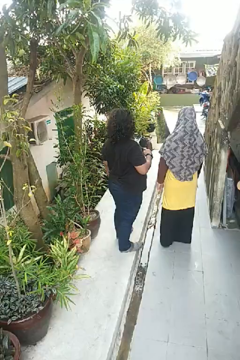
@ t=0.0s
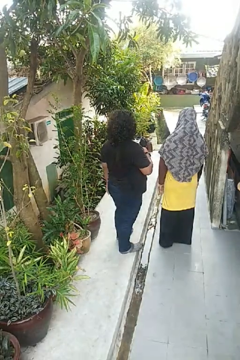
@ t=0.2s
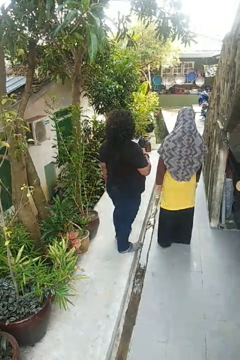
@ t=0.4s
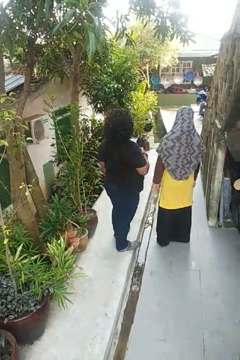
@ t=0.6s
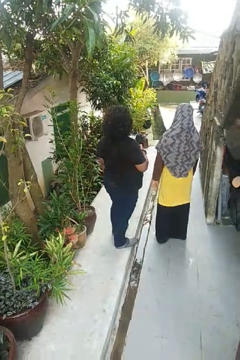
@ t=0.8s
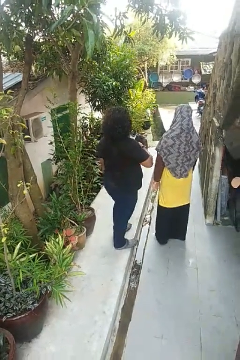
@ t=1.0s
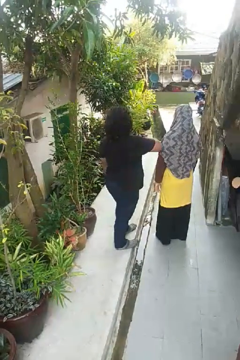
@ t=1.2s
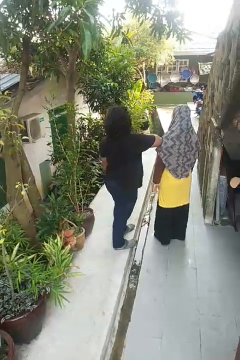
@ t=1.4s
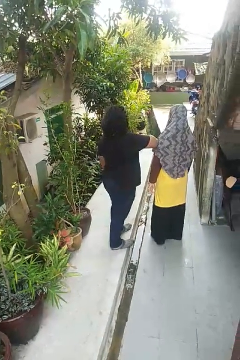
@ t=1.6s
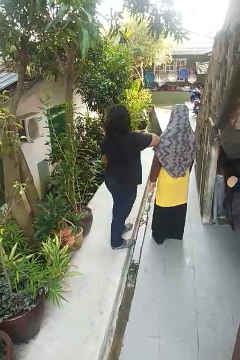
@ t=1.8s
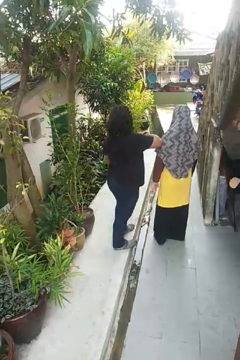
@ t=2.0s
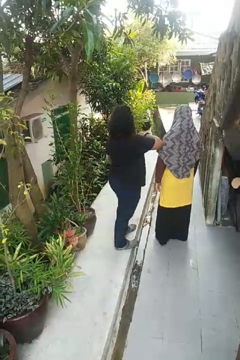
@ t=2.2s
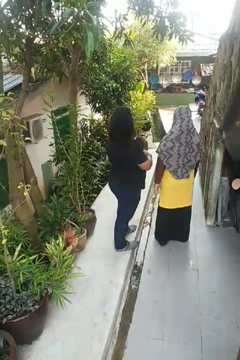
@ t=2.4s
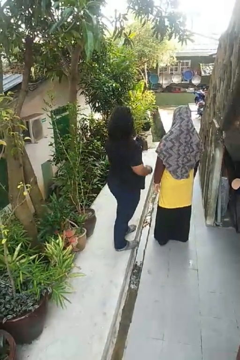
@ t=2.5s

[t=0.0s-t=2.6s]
person nudges person with elbow

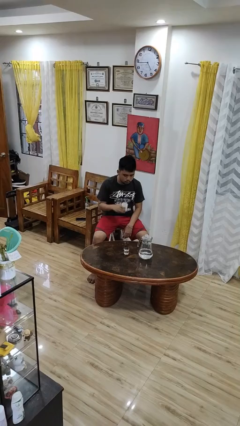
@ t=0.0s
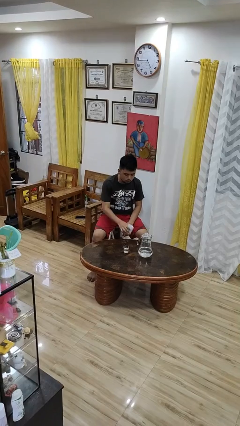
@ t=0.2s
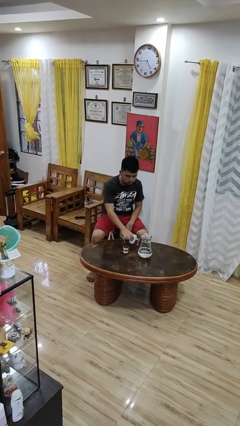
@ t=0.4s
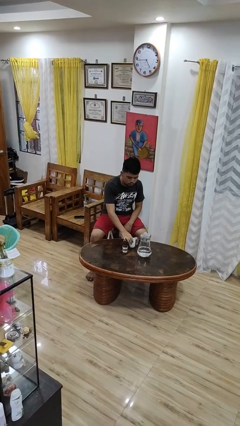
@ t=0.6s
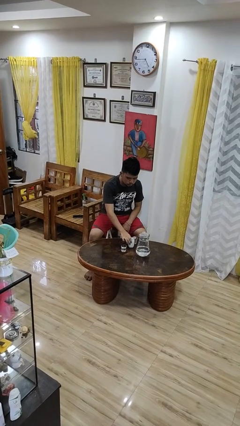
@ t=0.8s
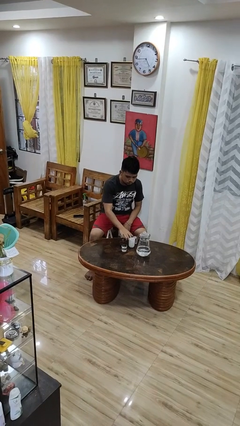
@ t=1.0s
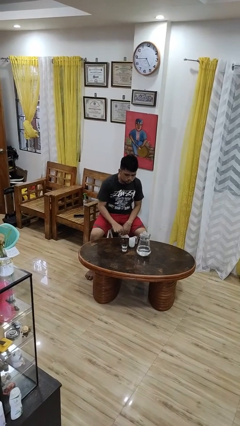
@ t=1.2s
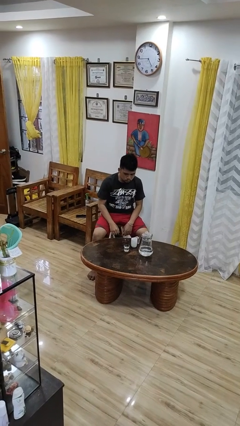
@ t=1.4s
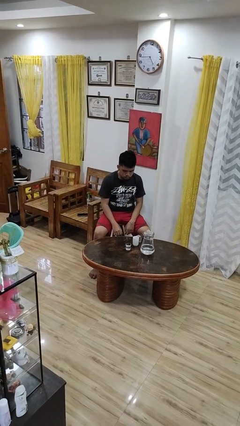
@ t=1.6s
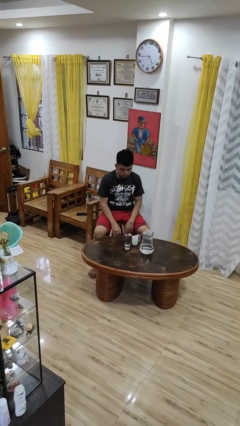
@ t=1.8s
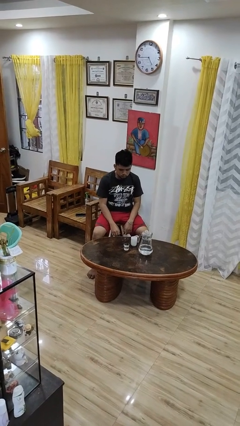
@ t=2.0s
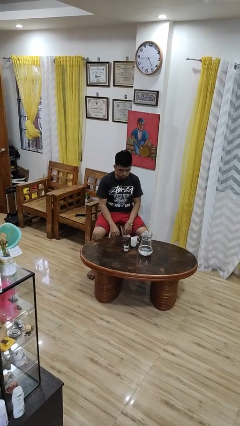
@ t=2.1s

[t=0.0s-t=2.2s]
person puts down object on table

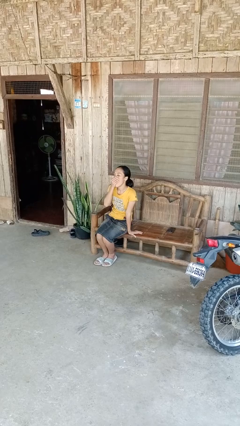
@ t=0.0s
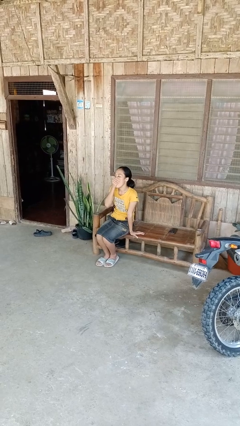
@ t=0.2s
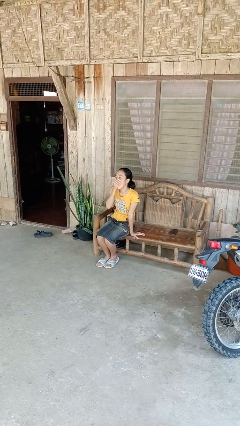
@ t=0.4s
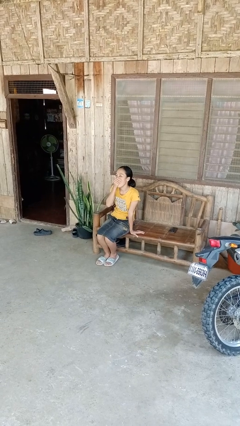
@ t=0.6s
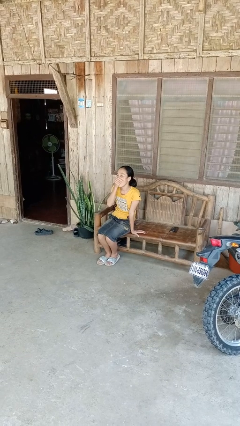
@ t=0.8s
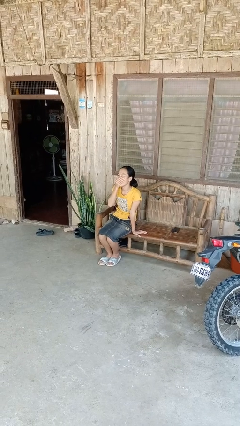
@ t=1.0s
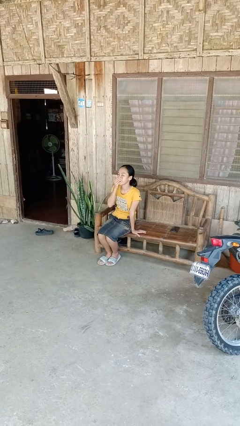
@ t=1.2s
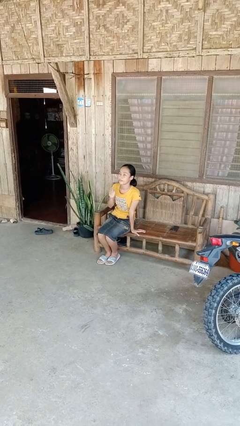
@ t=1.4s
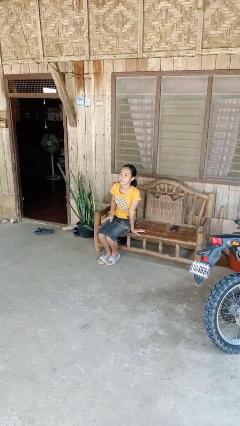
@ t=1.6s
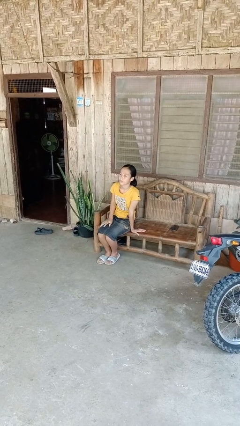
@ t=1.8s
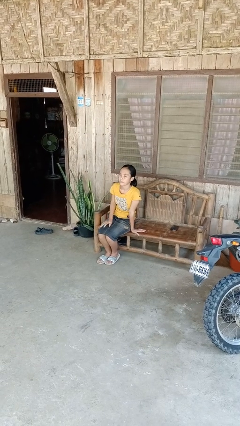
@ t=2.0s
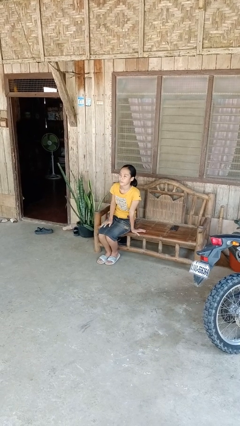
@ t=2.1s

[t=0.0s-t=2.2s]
person yawns

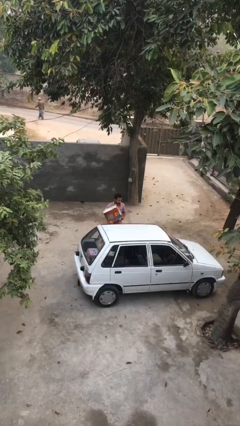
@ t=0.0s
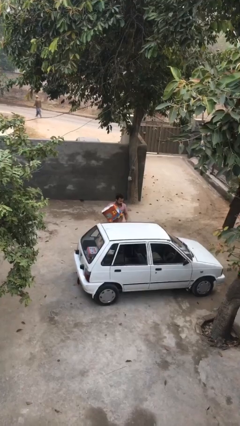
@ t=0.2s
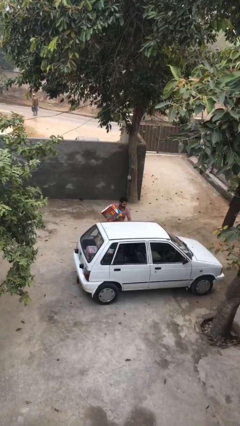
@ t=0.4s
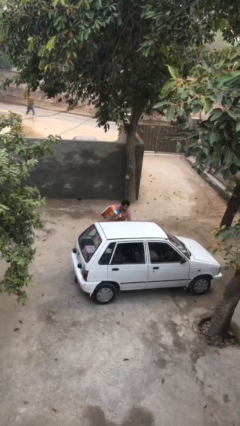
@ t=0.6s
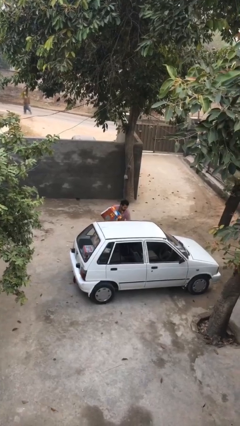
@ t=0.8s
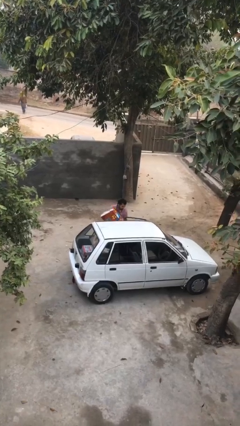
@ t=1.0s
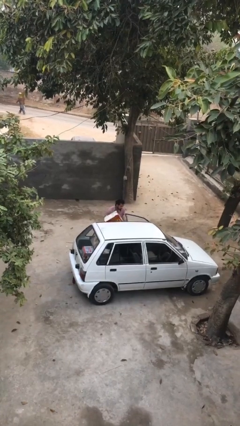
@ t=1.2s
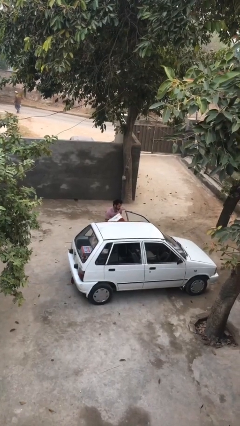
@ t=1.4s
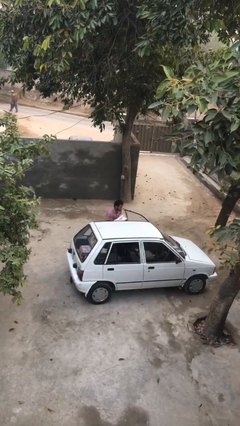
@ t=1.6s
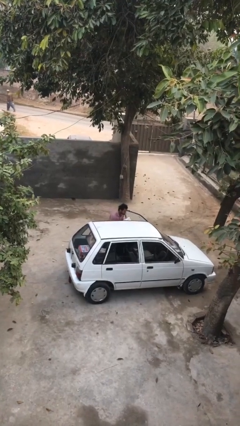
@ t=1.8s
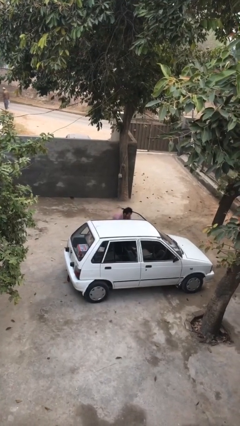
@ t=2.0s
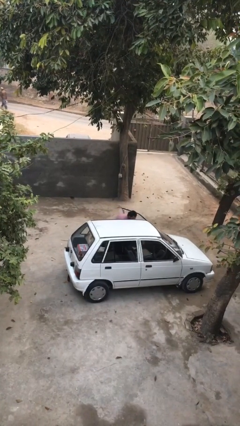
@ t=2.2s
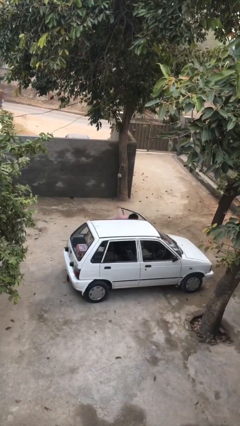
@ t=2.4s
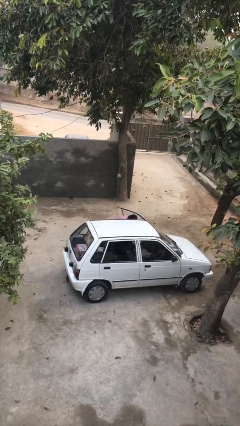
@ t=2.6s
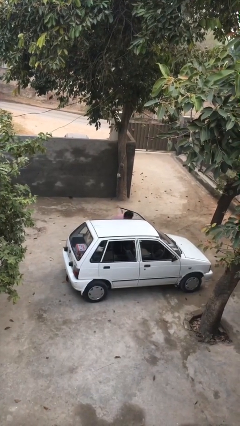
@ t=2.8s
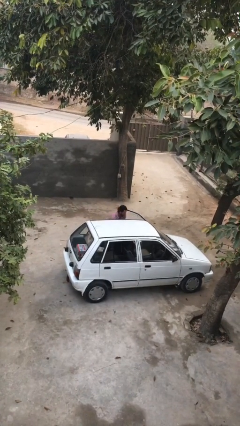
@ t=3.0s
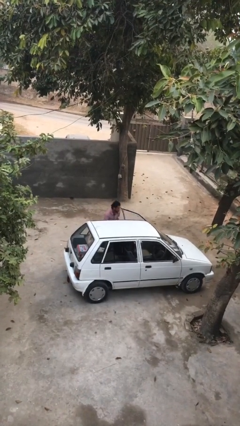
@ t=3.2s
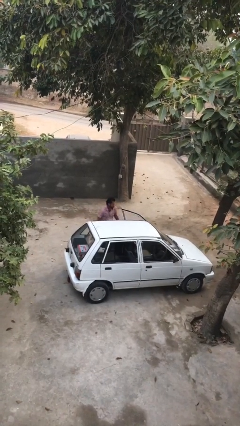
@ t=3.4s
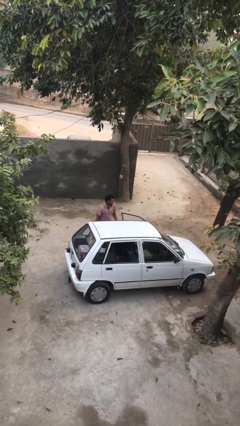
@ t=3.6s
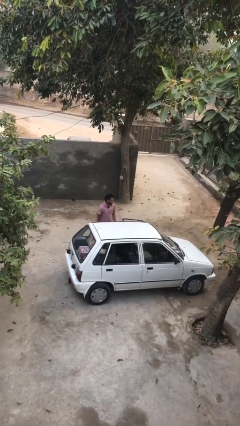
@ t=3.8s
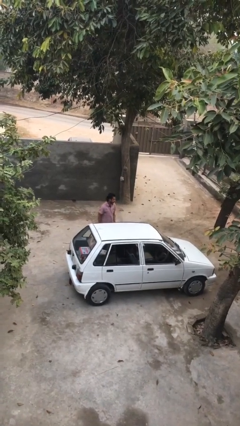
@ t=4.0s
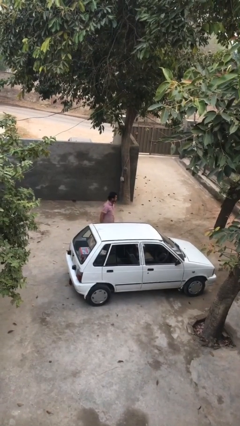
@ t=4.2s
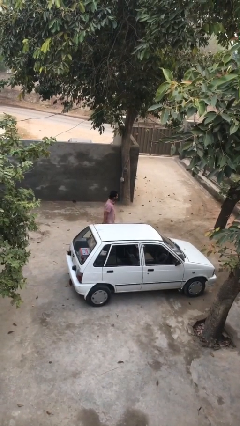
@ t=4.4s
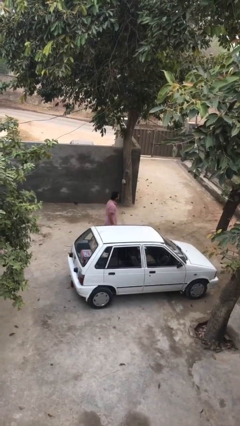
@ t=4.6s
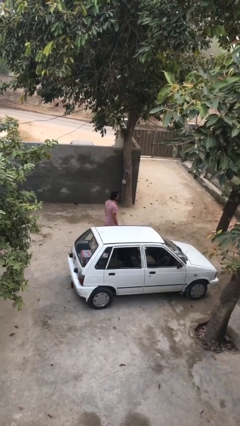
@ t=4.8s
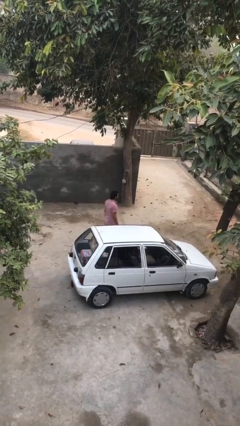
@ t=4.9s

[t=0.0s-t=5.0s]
person loads car

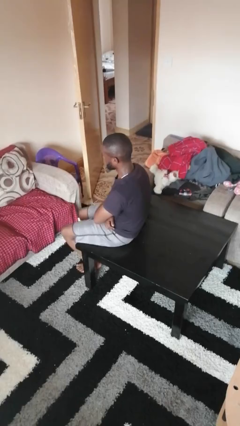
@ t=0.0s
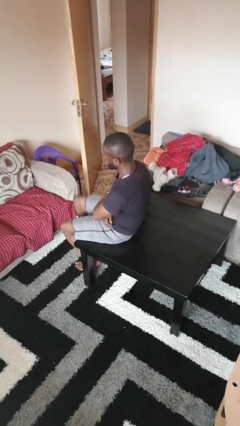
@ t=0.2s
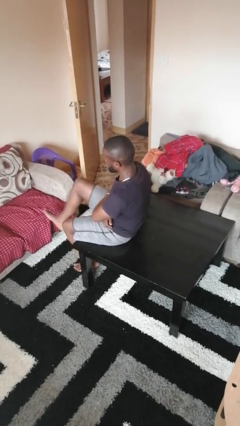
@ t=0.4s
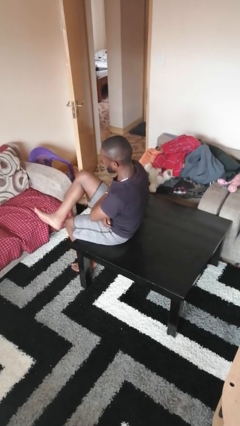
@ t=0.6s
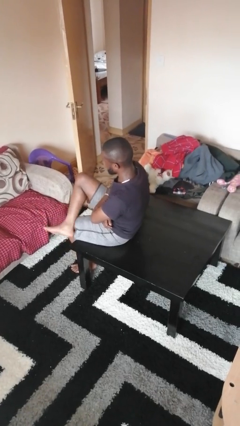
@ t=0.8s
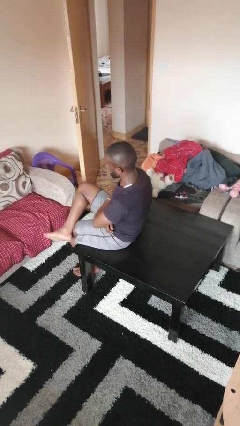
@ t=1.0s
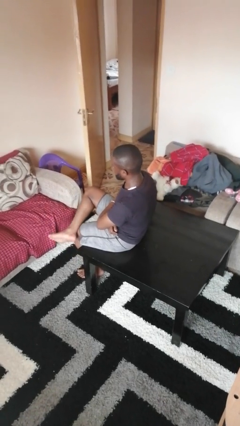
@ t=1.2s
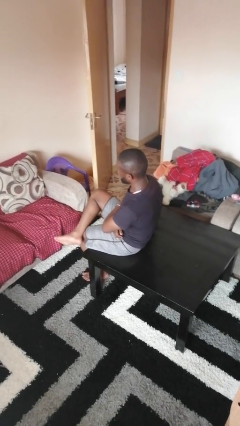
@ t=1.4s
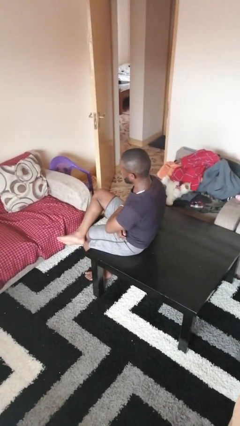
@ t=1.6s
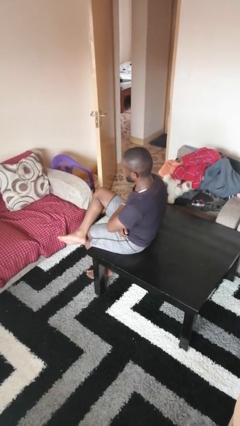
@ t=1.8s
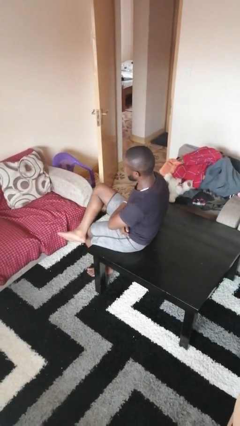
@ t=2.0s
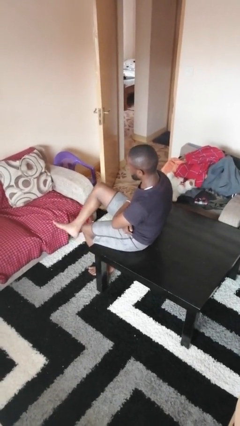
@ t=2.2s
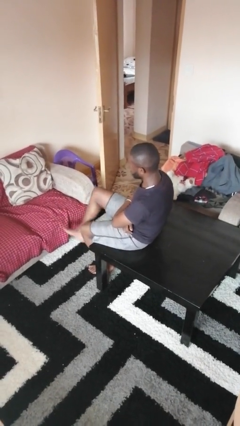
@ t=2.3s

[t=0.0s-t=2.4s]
person crosses legs

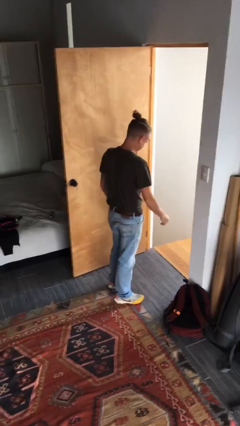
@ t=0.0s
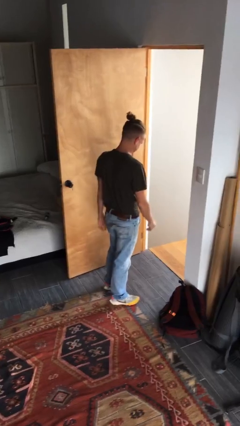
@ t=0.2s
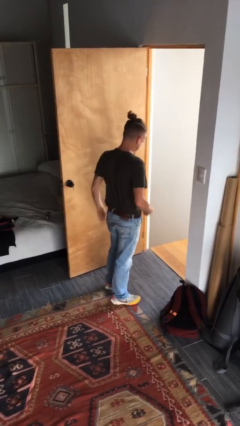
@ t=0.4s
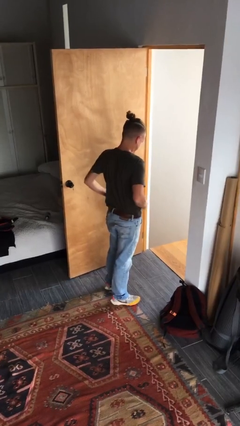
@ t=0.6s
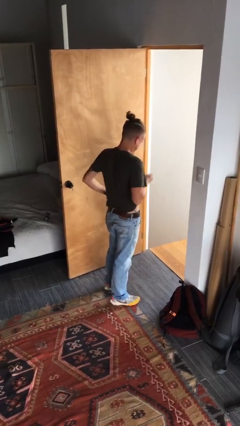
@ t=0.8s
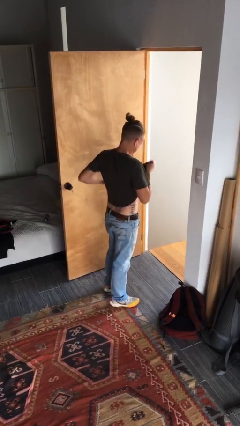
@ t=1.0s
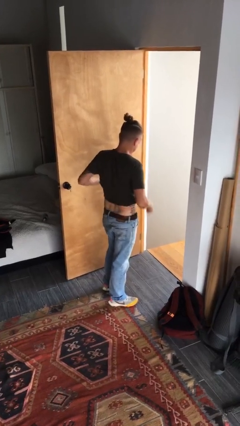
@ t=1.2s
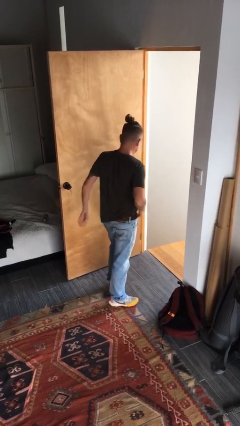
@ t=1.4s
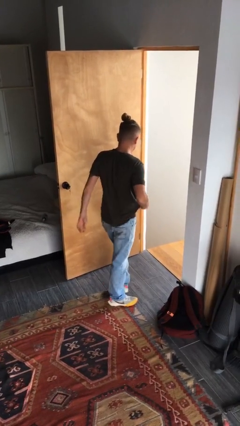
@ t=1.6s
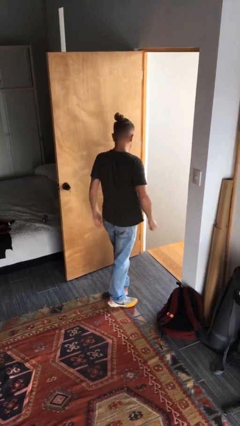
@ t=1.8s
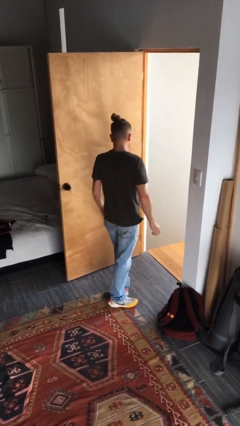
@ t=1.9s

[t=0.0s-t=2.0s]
person untucks shirt

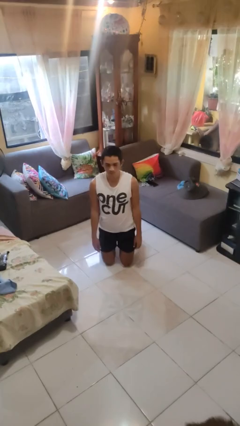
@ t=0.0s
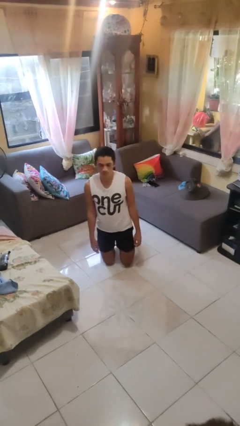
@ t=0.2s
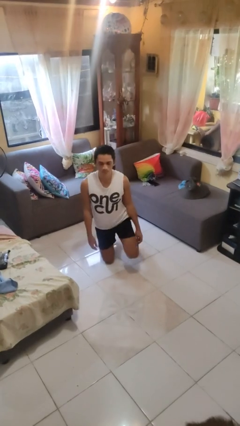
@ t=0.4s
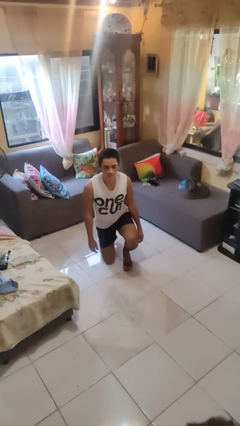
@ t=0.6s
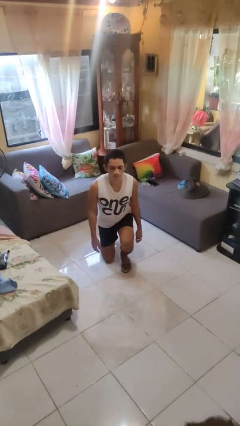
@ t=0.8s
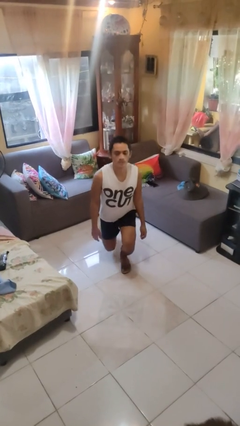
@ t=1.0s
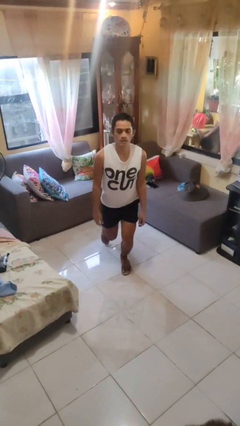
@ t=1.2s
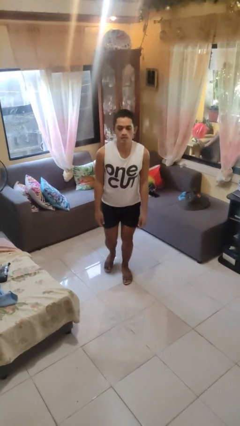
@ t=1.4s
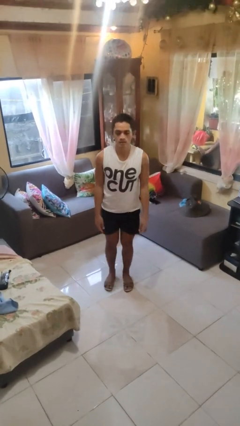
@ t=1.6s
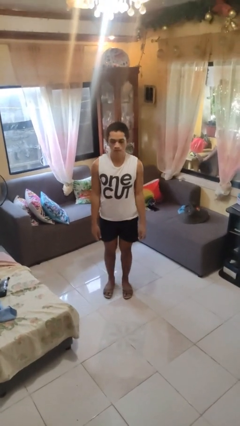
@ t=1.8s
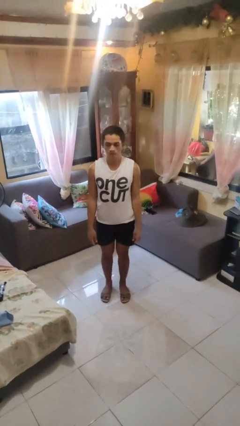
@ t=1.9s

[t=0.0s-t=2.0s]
person stands up from floor
